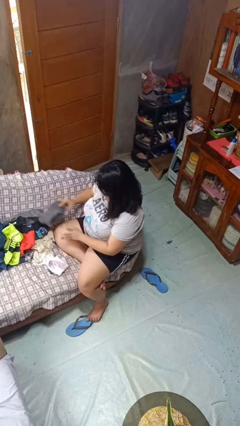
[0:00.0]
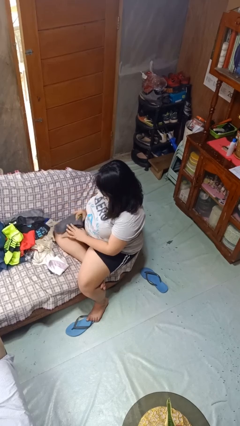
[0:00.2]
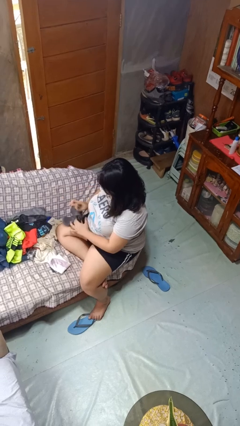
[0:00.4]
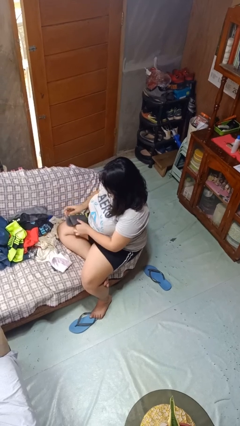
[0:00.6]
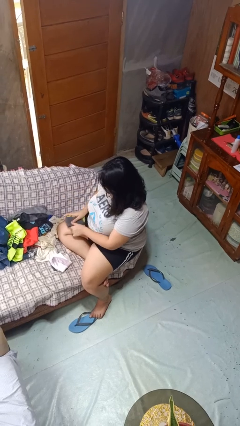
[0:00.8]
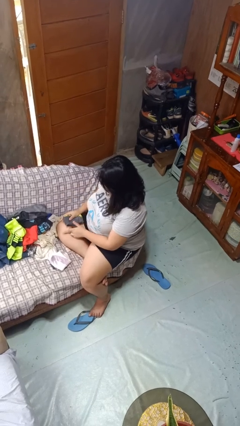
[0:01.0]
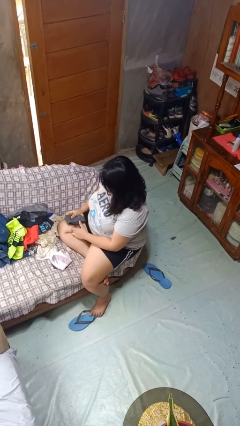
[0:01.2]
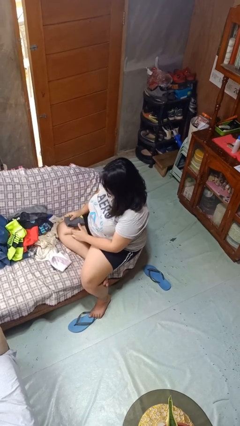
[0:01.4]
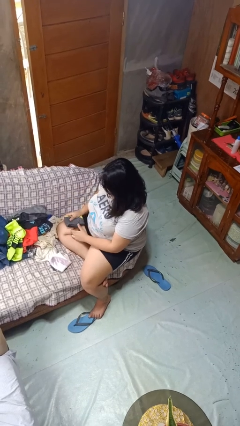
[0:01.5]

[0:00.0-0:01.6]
person folds socks

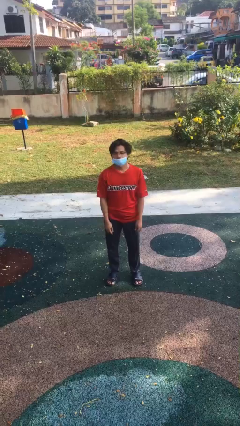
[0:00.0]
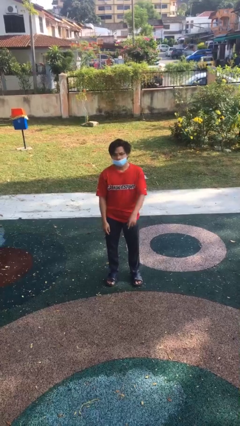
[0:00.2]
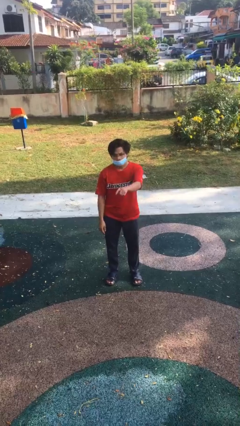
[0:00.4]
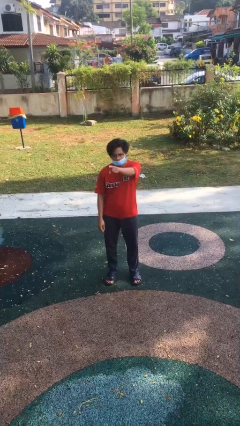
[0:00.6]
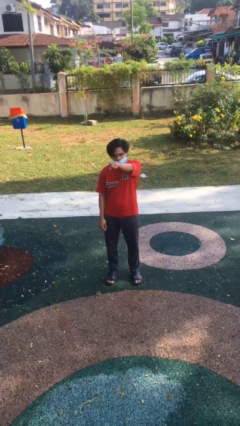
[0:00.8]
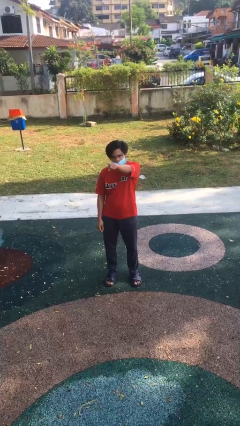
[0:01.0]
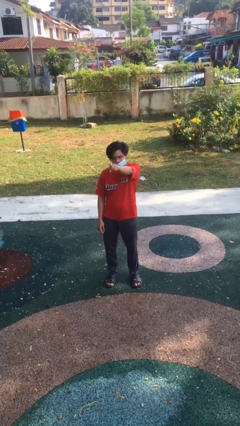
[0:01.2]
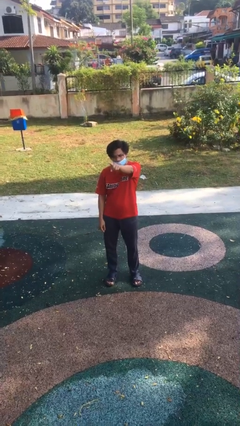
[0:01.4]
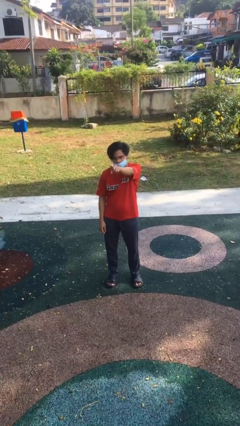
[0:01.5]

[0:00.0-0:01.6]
person points at person

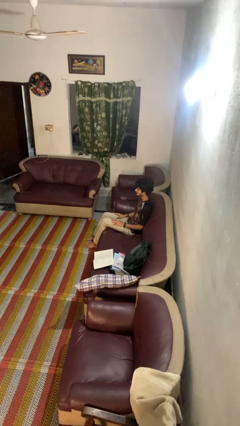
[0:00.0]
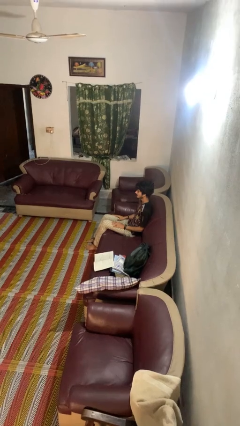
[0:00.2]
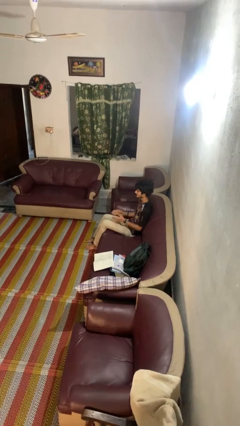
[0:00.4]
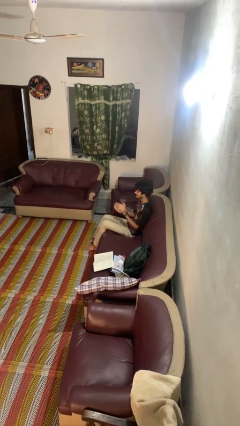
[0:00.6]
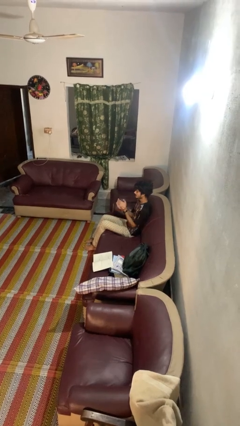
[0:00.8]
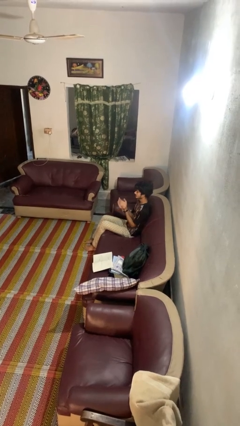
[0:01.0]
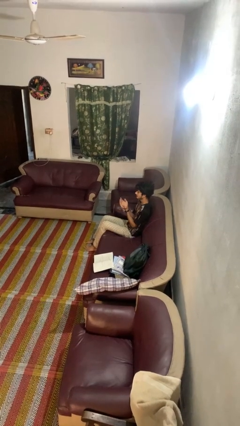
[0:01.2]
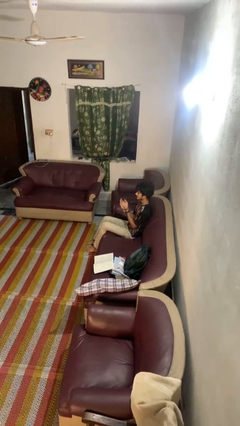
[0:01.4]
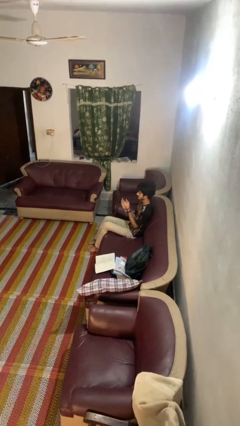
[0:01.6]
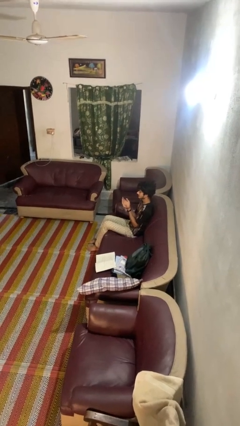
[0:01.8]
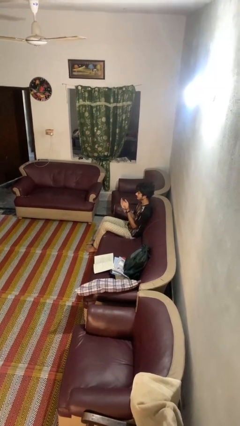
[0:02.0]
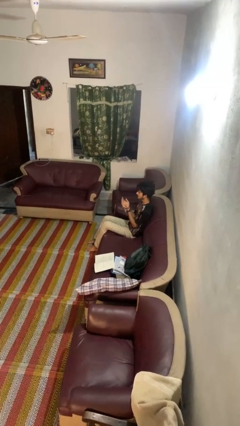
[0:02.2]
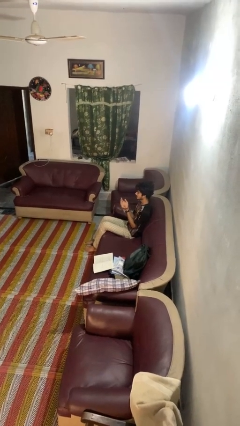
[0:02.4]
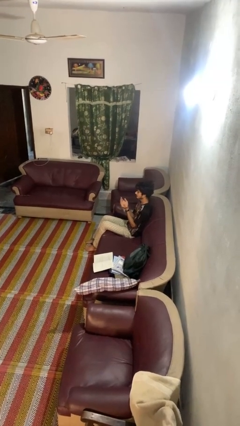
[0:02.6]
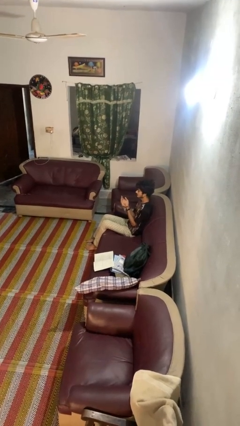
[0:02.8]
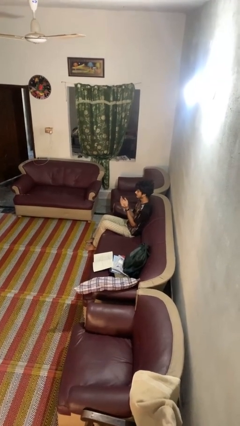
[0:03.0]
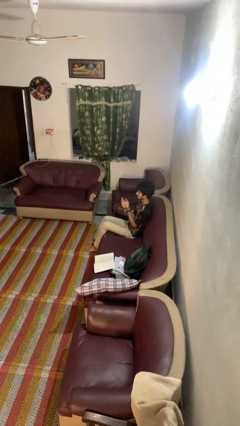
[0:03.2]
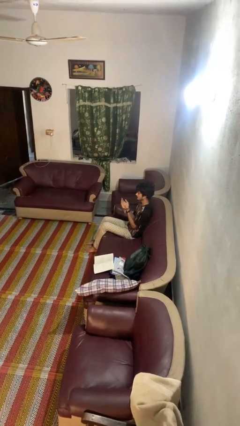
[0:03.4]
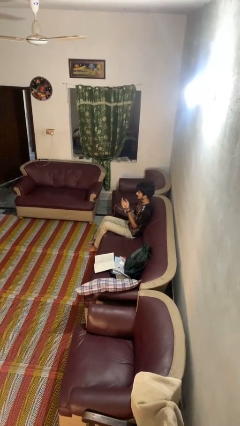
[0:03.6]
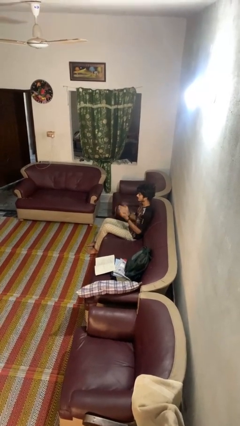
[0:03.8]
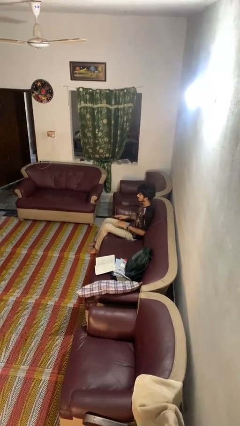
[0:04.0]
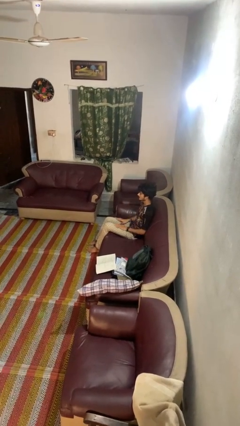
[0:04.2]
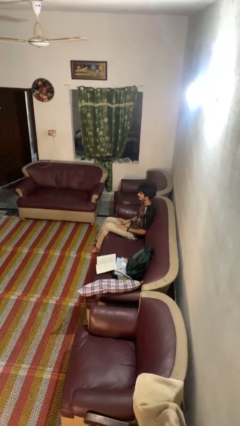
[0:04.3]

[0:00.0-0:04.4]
person prays

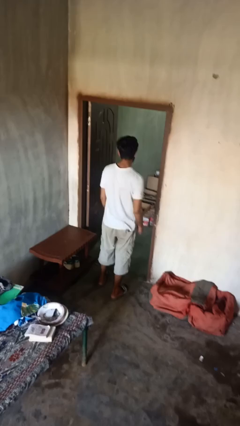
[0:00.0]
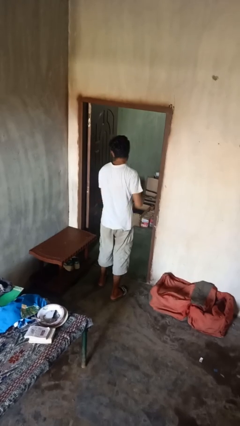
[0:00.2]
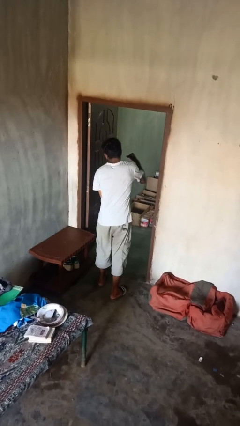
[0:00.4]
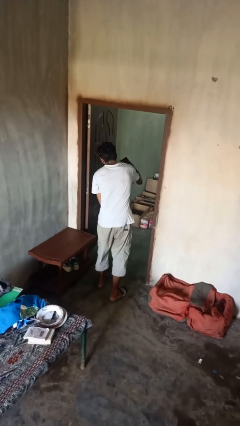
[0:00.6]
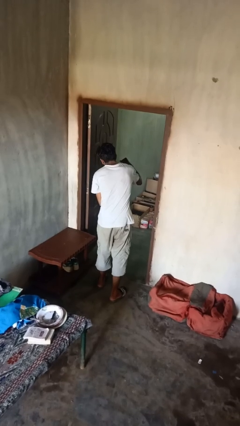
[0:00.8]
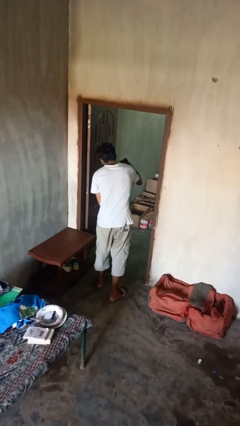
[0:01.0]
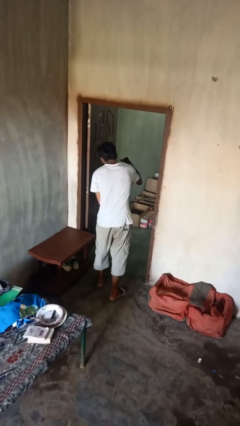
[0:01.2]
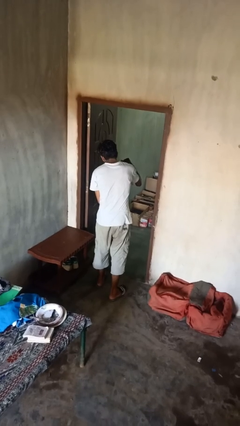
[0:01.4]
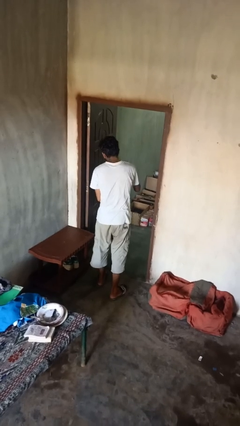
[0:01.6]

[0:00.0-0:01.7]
person punches

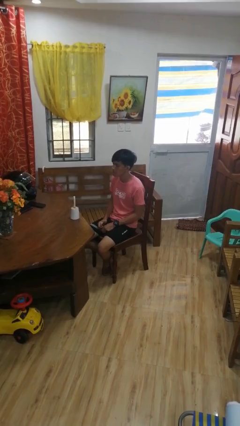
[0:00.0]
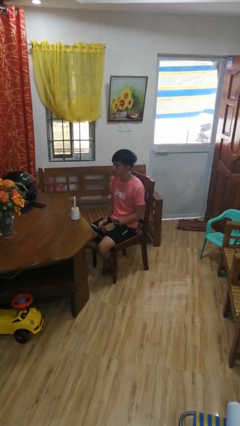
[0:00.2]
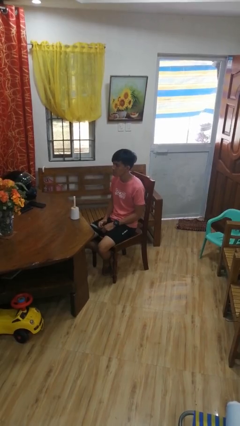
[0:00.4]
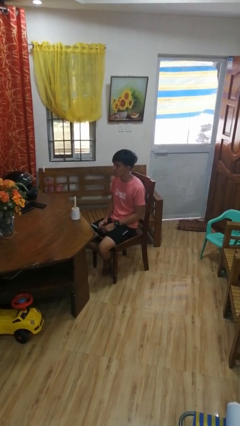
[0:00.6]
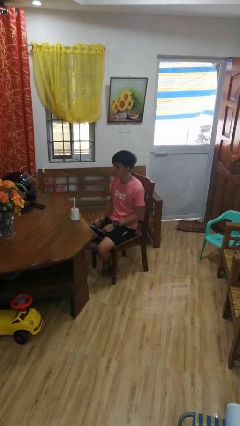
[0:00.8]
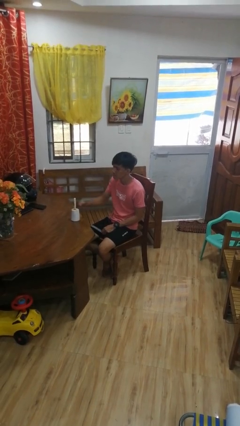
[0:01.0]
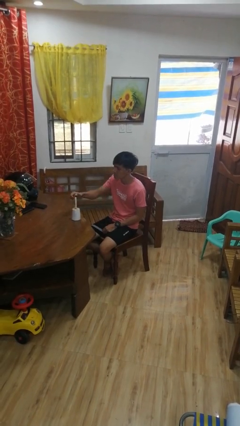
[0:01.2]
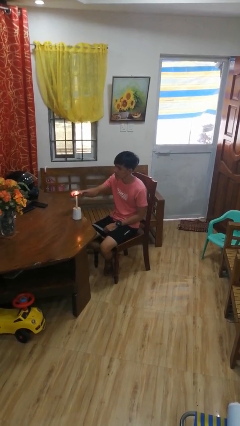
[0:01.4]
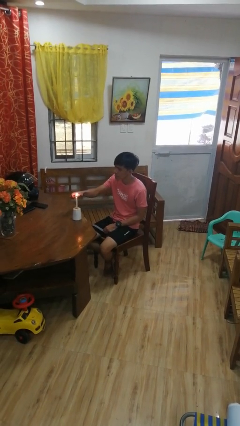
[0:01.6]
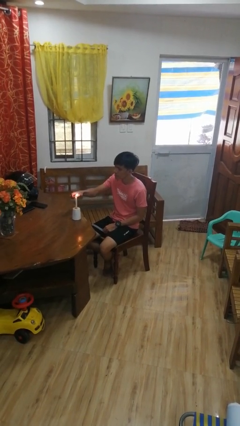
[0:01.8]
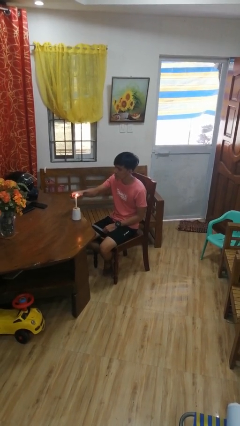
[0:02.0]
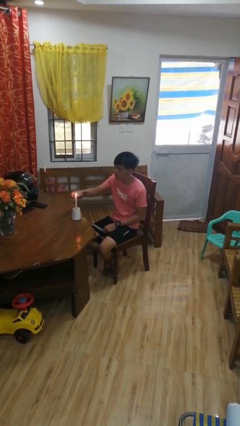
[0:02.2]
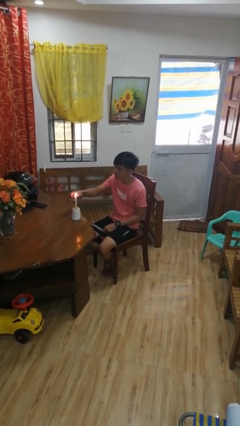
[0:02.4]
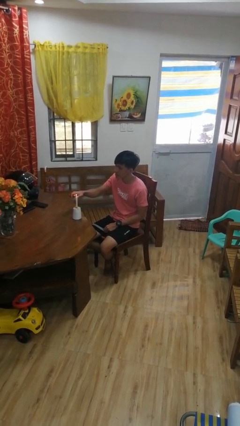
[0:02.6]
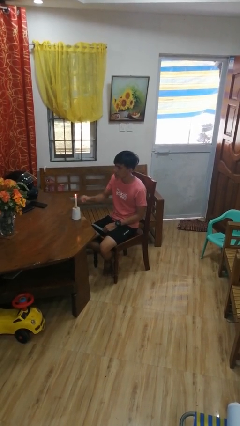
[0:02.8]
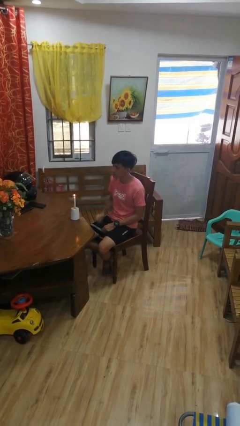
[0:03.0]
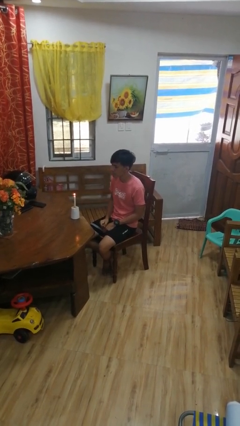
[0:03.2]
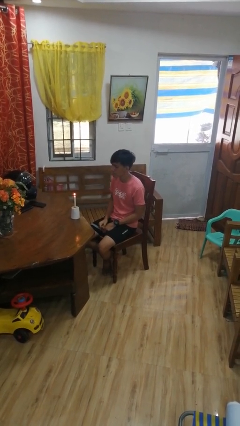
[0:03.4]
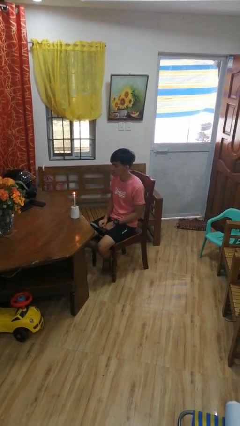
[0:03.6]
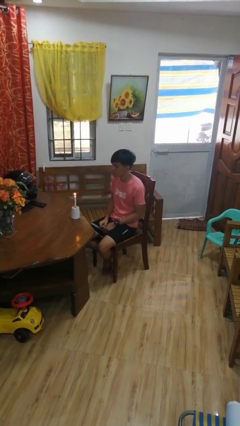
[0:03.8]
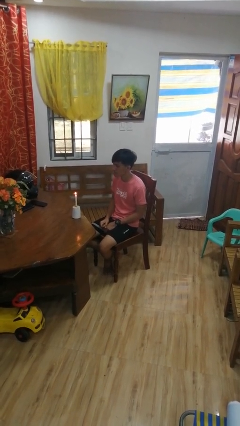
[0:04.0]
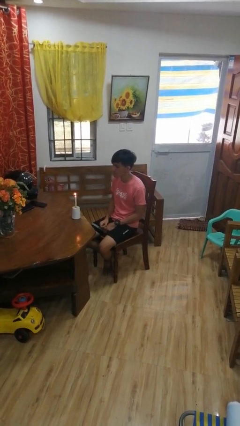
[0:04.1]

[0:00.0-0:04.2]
person lights candle

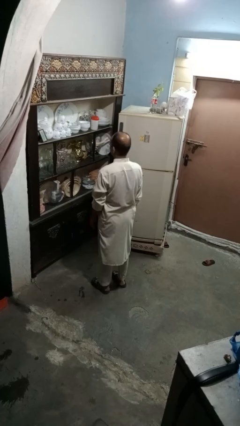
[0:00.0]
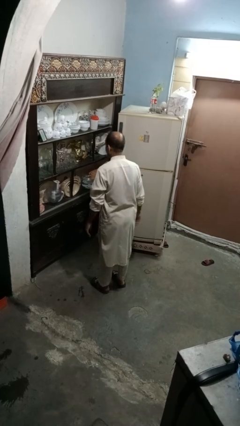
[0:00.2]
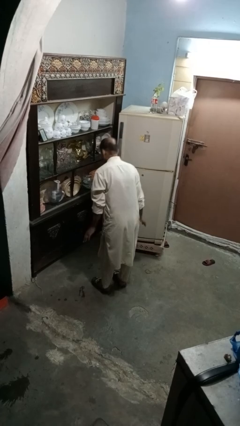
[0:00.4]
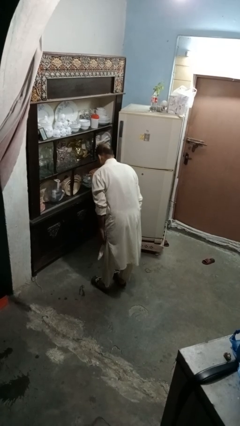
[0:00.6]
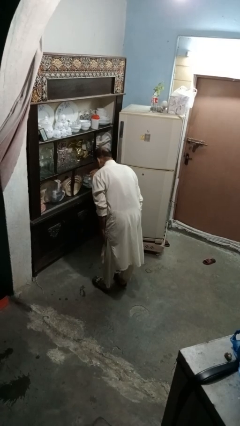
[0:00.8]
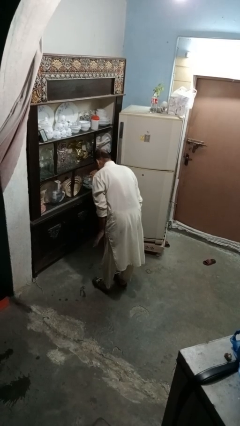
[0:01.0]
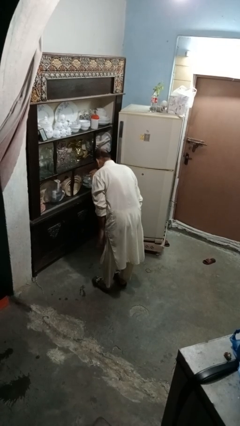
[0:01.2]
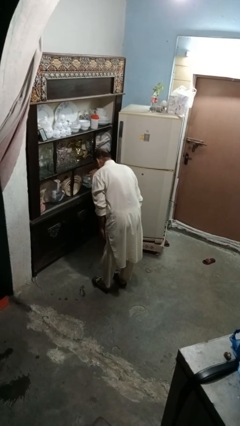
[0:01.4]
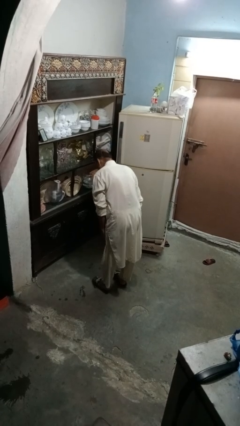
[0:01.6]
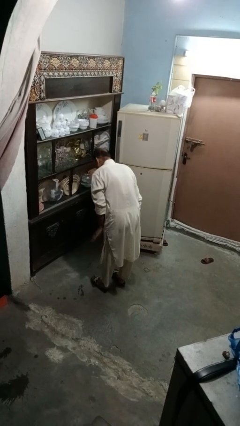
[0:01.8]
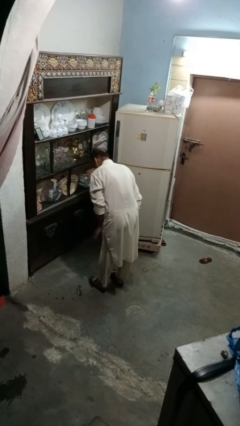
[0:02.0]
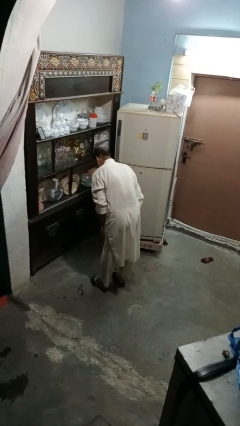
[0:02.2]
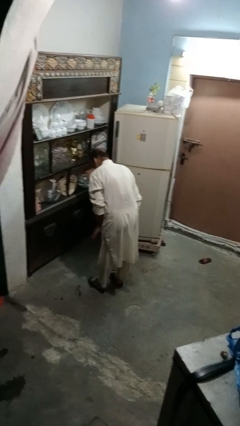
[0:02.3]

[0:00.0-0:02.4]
person slaps hands on thighs

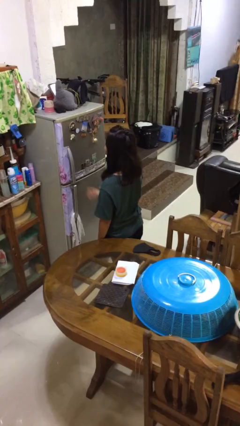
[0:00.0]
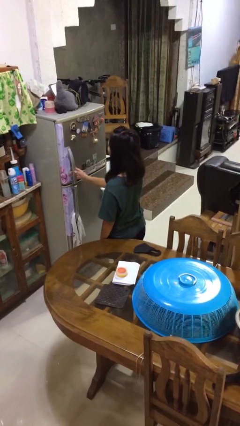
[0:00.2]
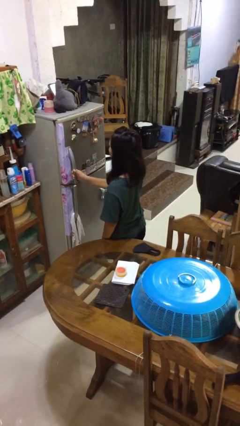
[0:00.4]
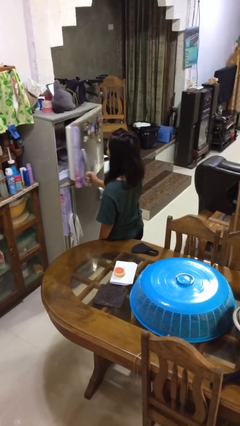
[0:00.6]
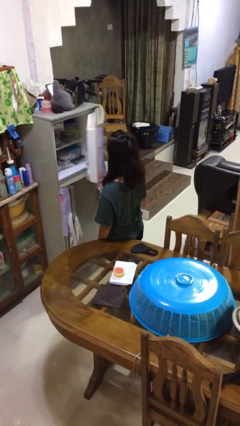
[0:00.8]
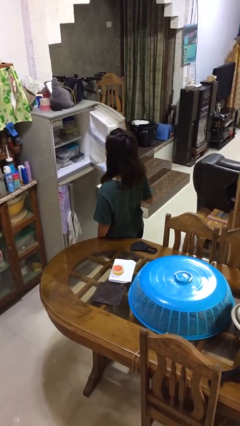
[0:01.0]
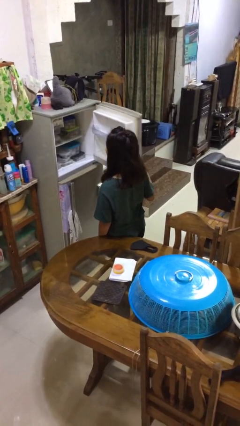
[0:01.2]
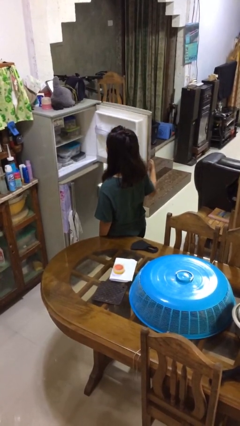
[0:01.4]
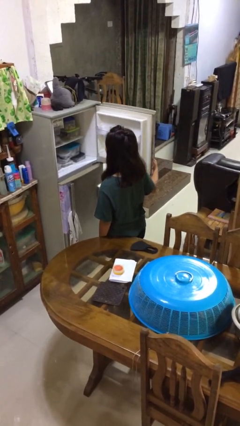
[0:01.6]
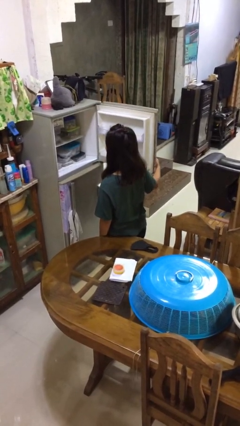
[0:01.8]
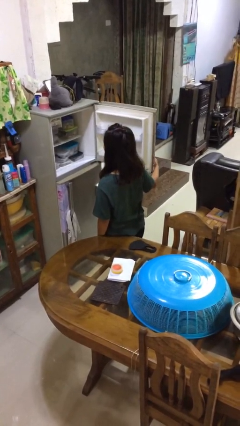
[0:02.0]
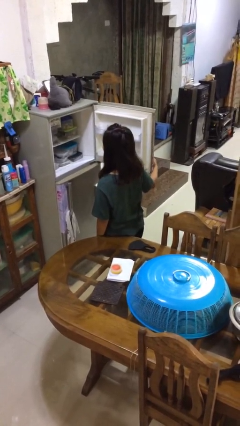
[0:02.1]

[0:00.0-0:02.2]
person opens refrigerator
